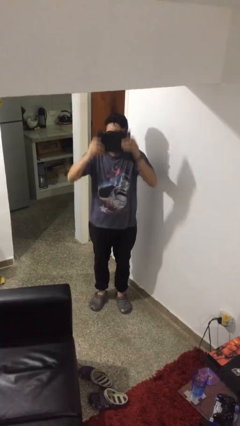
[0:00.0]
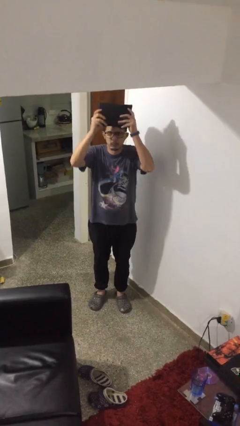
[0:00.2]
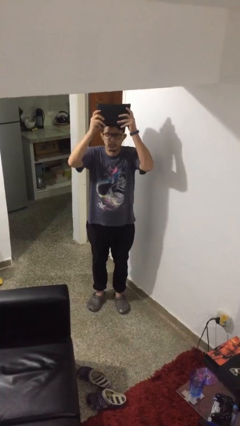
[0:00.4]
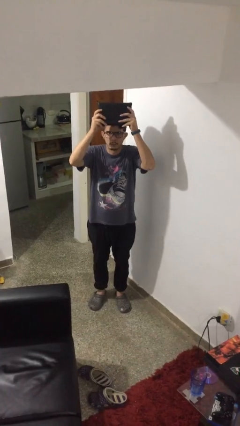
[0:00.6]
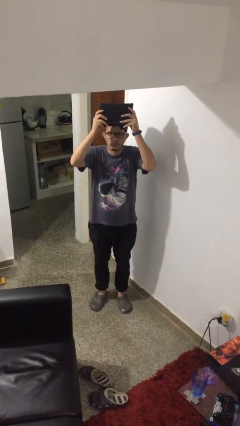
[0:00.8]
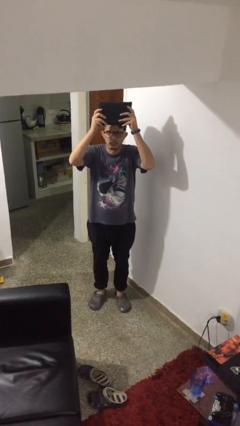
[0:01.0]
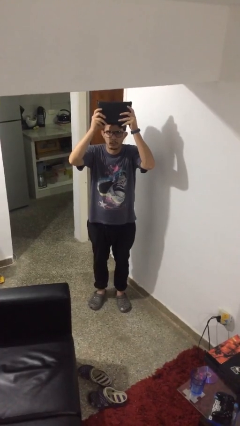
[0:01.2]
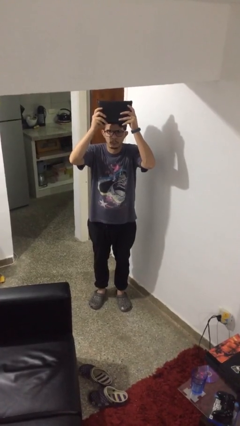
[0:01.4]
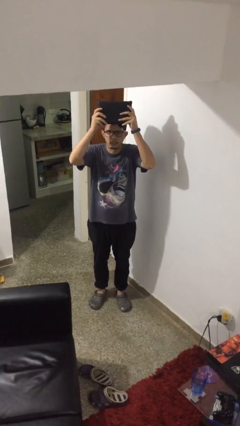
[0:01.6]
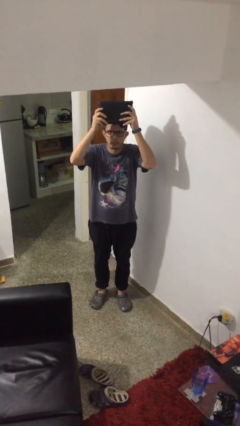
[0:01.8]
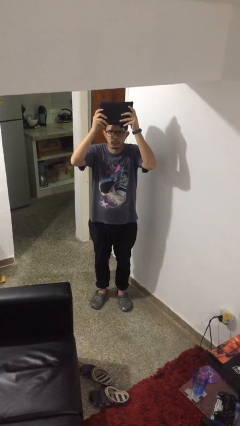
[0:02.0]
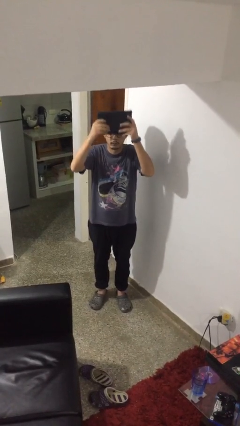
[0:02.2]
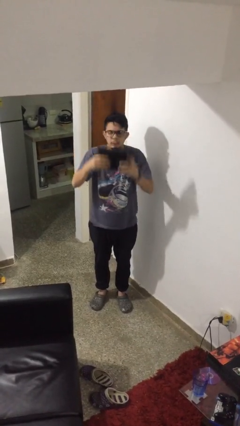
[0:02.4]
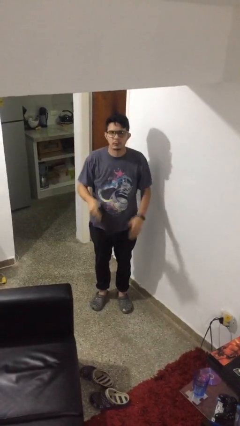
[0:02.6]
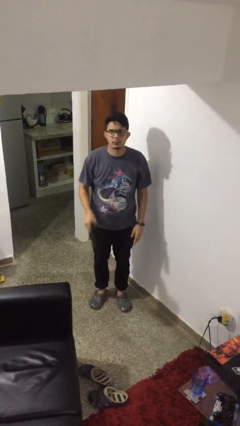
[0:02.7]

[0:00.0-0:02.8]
person holds object above head

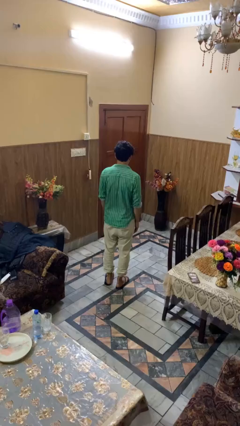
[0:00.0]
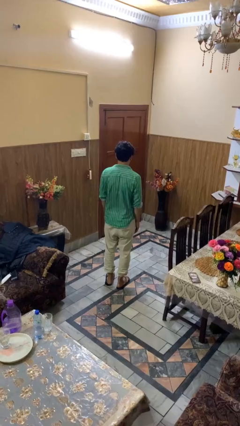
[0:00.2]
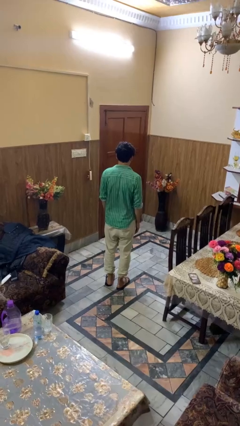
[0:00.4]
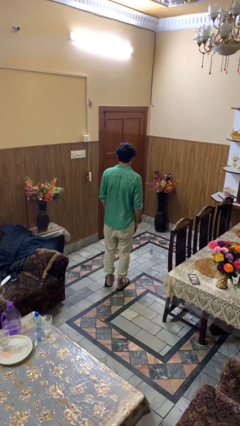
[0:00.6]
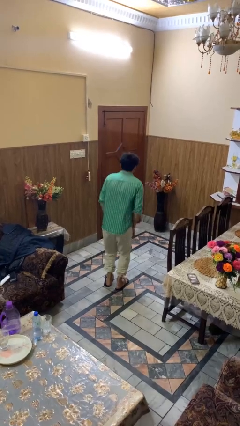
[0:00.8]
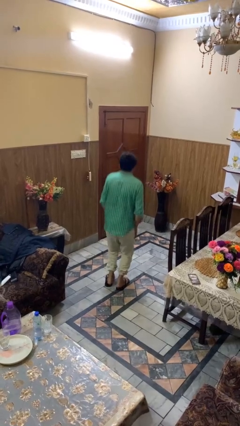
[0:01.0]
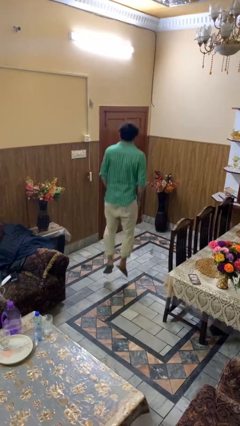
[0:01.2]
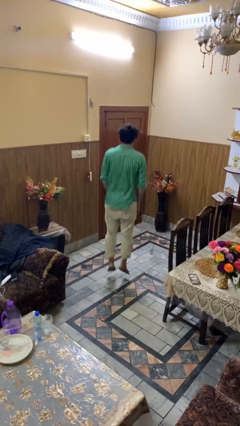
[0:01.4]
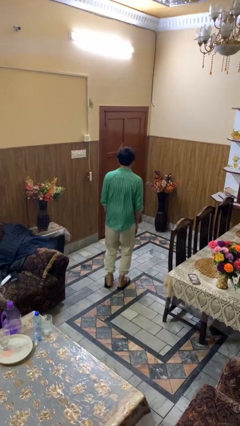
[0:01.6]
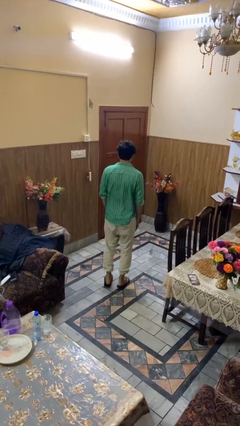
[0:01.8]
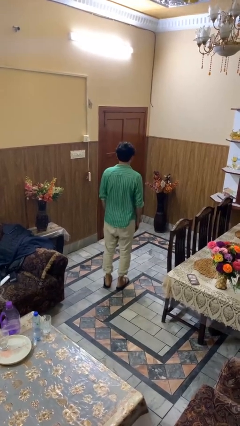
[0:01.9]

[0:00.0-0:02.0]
person jumps

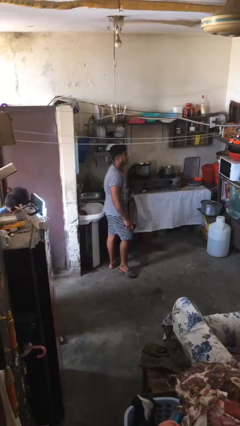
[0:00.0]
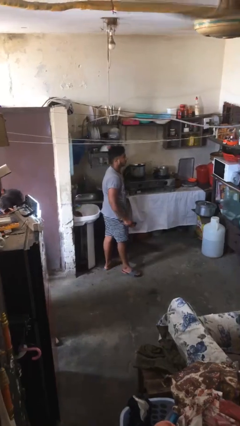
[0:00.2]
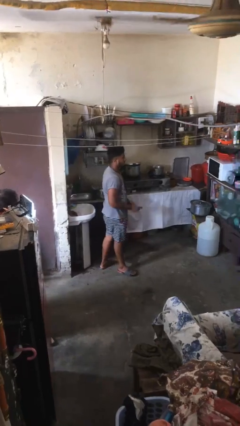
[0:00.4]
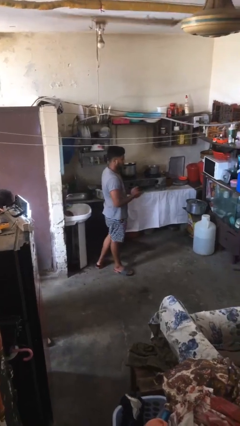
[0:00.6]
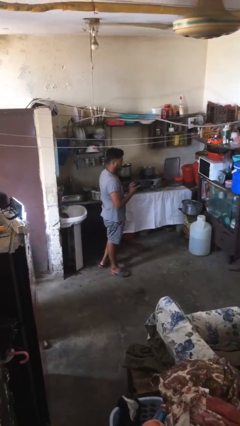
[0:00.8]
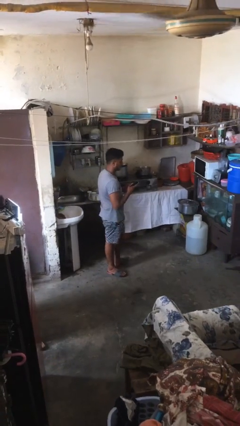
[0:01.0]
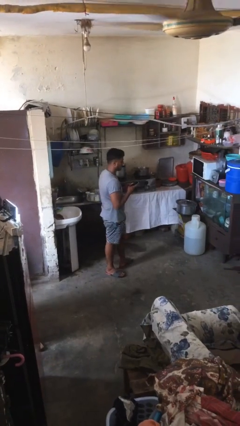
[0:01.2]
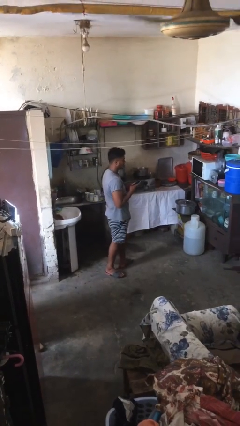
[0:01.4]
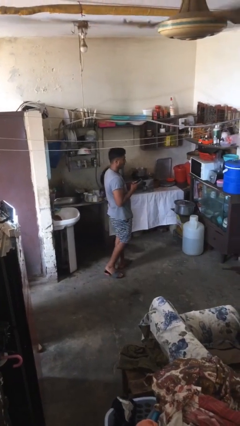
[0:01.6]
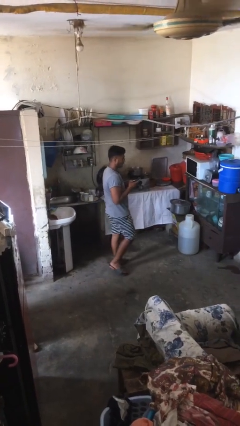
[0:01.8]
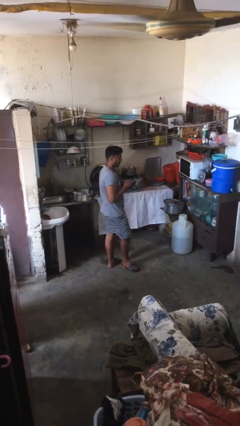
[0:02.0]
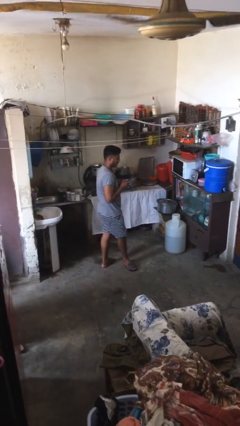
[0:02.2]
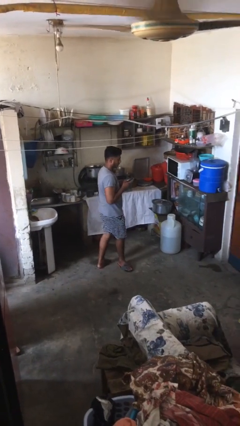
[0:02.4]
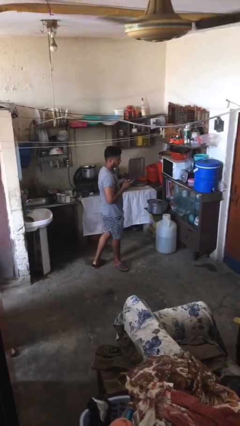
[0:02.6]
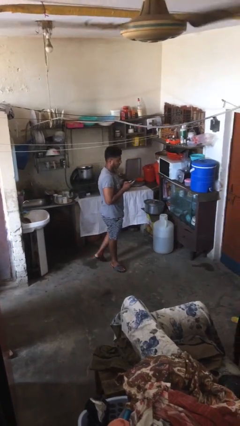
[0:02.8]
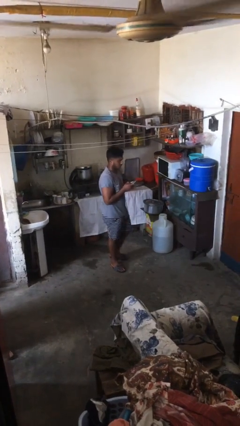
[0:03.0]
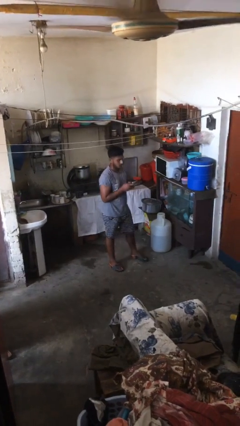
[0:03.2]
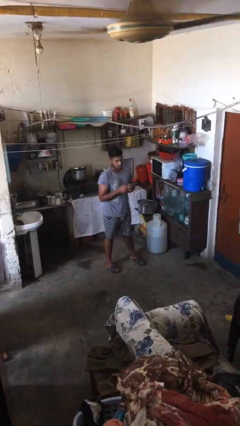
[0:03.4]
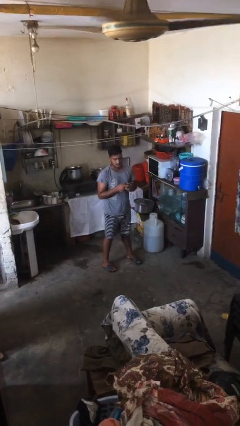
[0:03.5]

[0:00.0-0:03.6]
person texts on phone

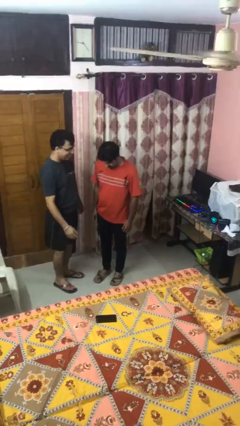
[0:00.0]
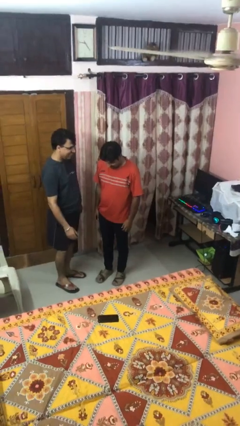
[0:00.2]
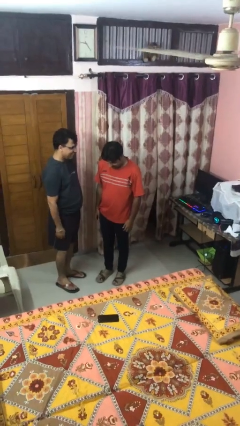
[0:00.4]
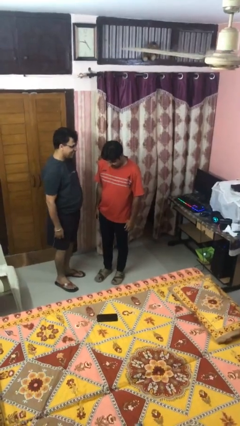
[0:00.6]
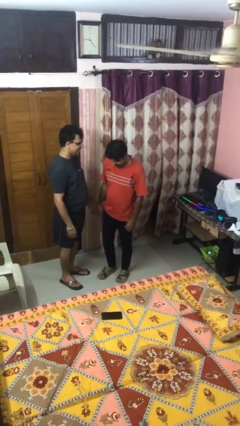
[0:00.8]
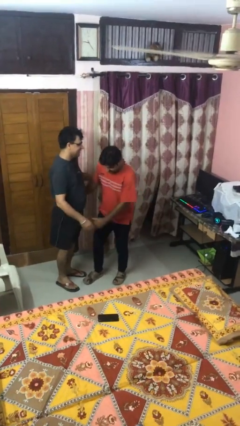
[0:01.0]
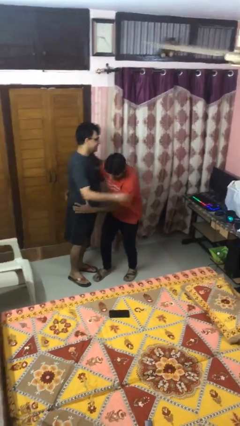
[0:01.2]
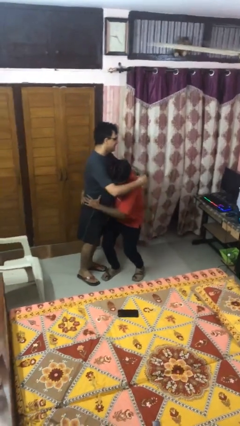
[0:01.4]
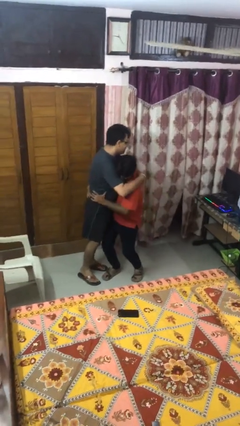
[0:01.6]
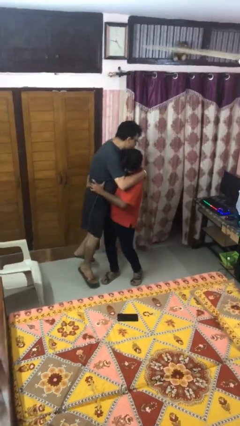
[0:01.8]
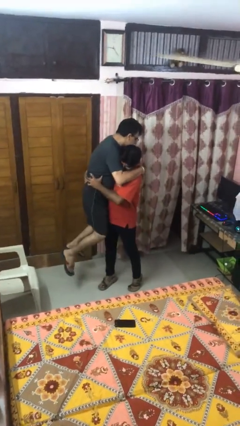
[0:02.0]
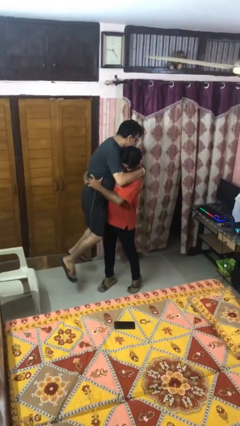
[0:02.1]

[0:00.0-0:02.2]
person picks up person

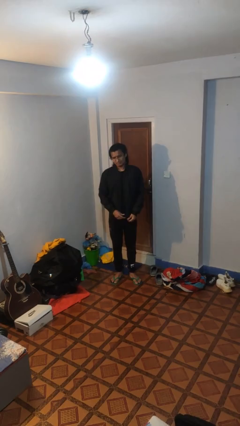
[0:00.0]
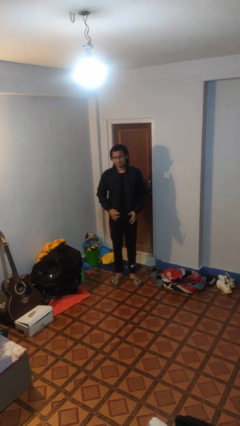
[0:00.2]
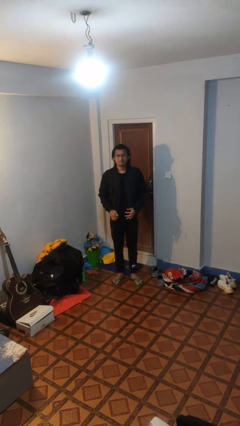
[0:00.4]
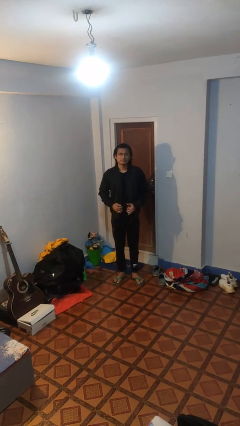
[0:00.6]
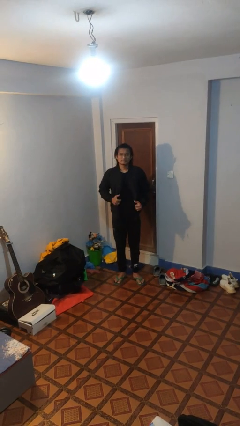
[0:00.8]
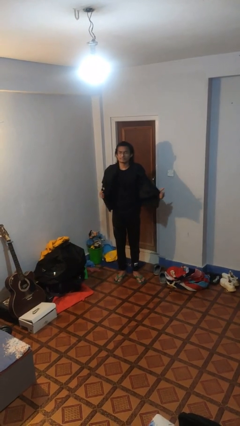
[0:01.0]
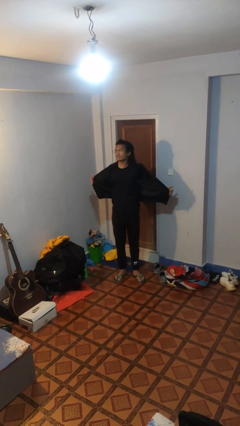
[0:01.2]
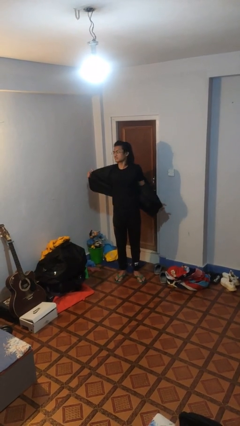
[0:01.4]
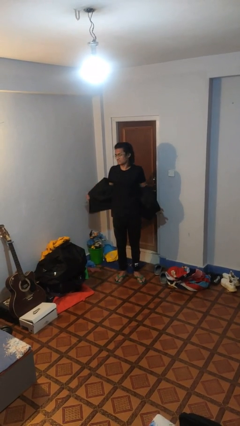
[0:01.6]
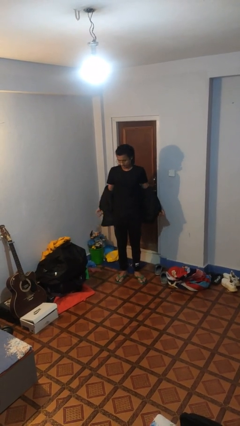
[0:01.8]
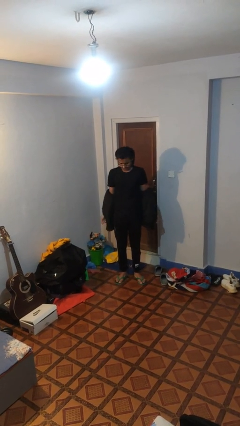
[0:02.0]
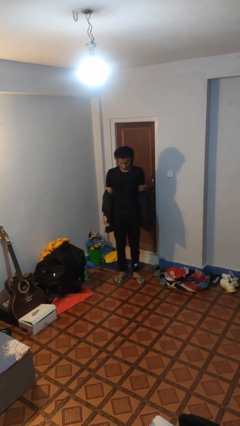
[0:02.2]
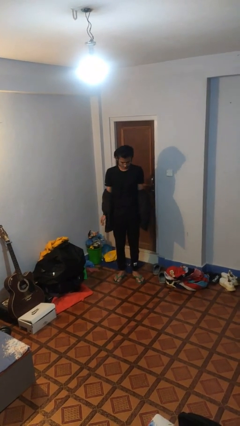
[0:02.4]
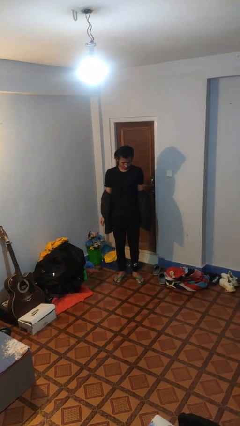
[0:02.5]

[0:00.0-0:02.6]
person takes off jacket

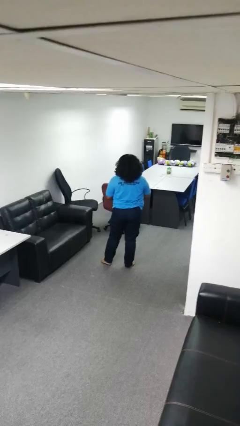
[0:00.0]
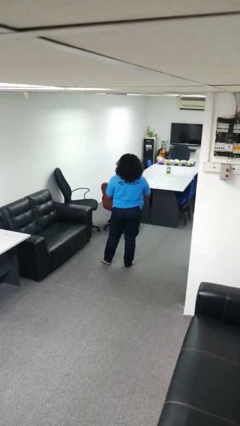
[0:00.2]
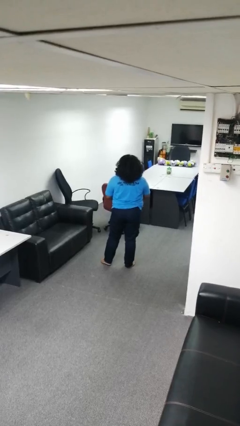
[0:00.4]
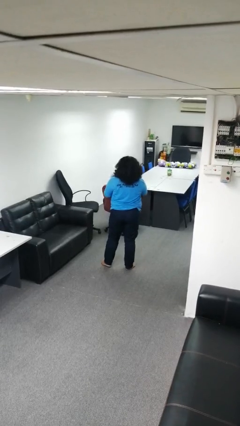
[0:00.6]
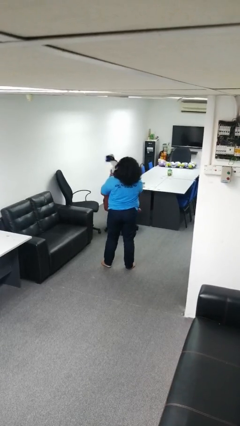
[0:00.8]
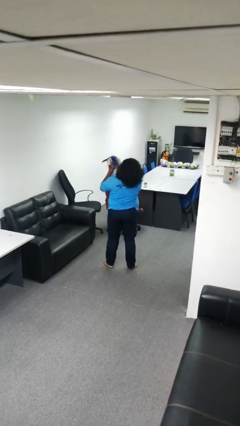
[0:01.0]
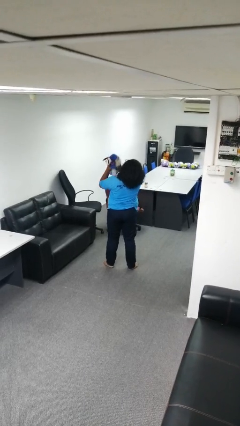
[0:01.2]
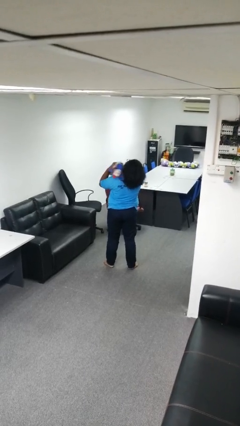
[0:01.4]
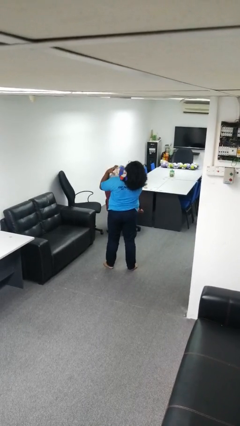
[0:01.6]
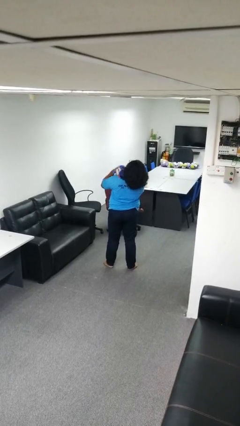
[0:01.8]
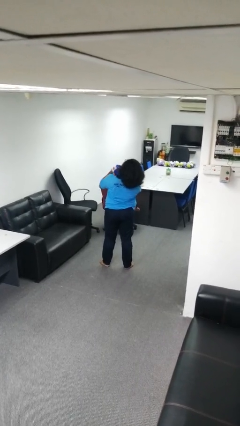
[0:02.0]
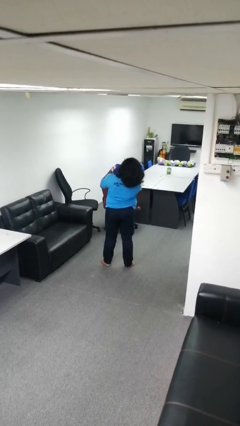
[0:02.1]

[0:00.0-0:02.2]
person hugs stuffed animal

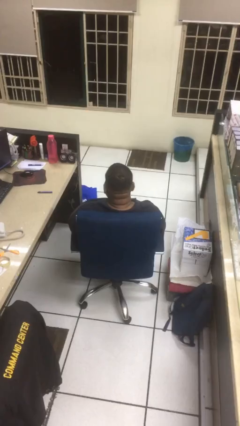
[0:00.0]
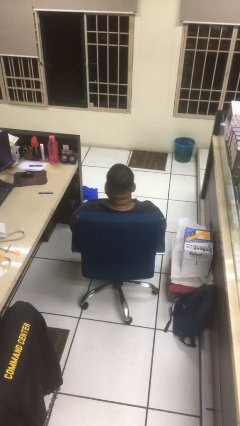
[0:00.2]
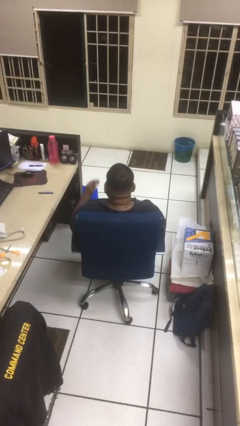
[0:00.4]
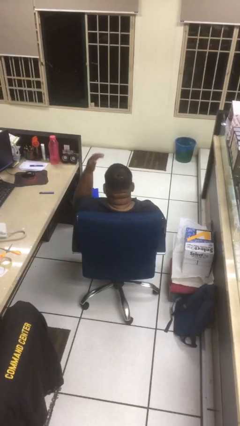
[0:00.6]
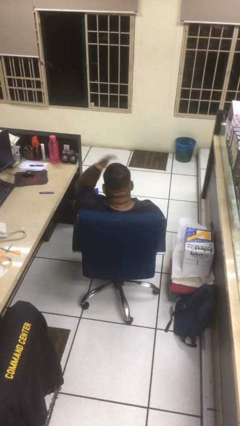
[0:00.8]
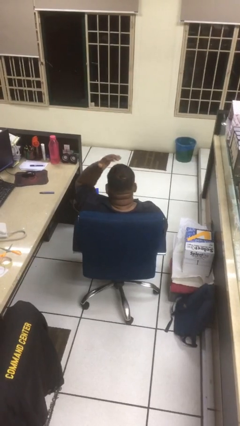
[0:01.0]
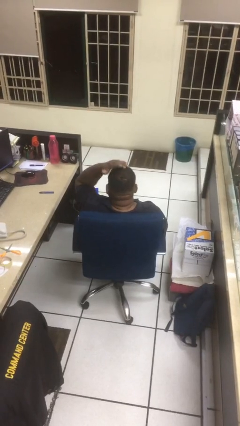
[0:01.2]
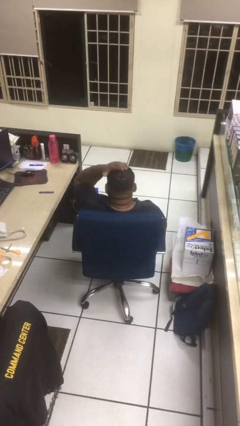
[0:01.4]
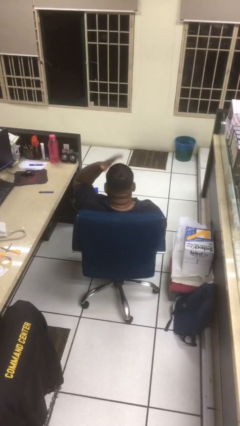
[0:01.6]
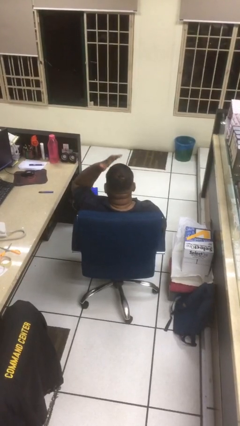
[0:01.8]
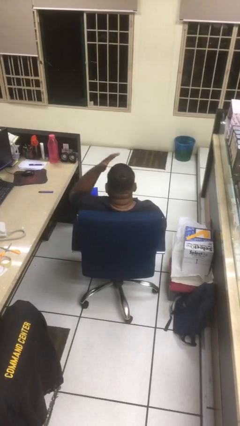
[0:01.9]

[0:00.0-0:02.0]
person pats head
